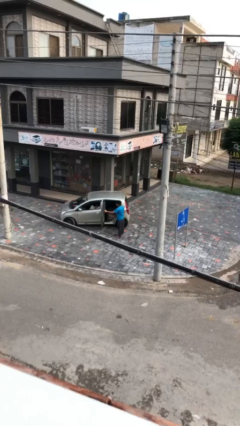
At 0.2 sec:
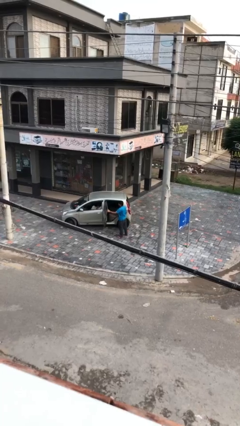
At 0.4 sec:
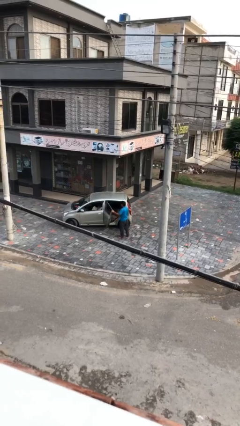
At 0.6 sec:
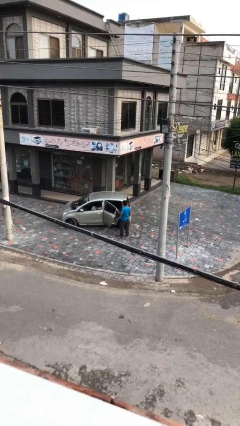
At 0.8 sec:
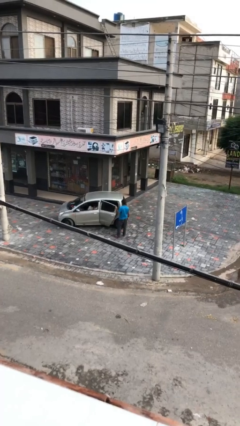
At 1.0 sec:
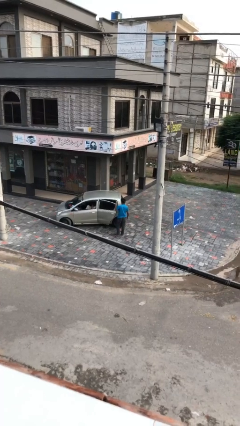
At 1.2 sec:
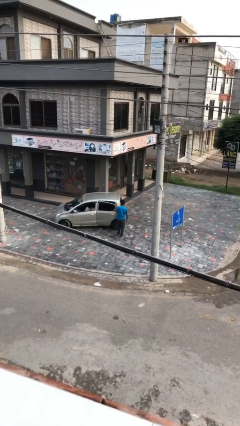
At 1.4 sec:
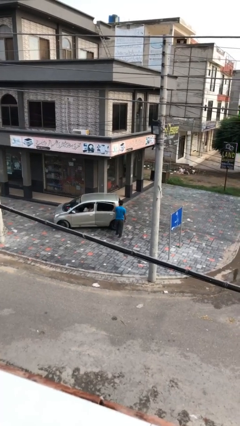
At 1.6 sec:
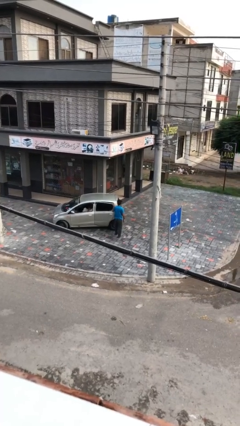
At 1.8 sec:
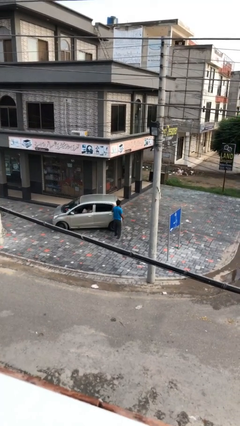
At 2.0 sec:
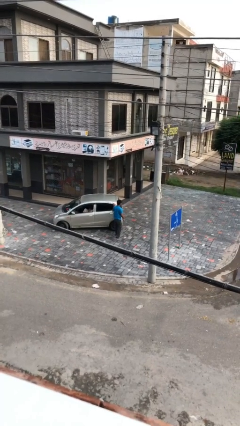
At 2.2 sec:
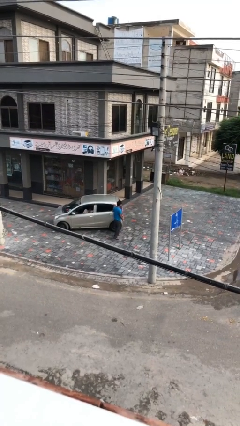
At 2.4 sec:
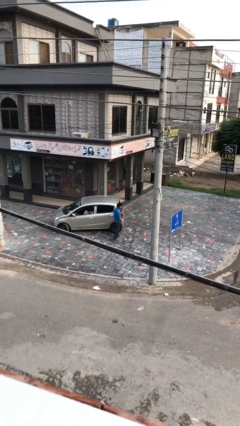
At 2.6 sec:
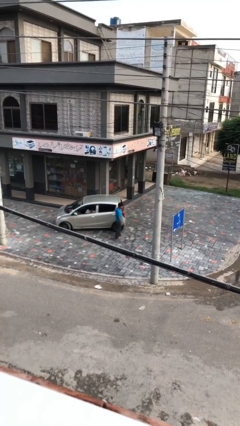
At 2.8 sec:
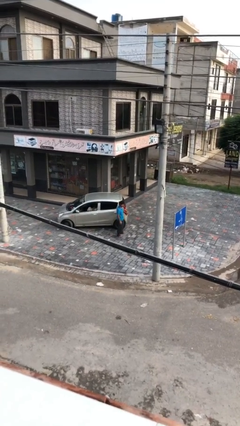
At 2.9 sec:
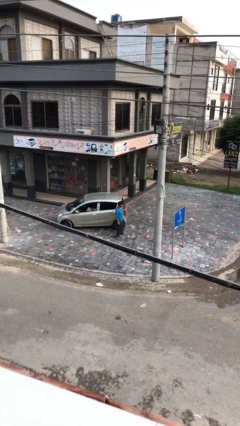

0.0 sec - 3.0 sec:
person closes car door

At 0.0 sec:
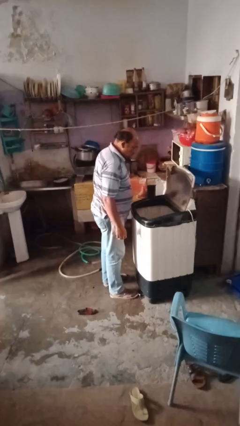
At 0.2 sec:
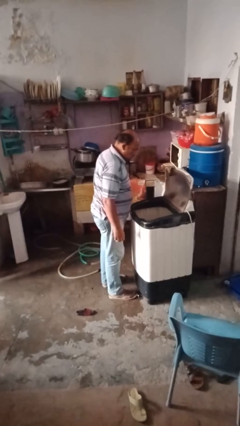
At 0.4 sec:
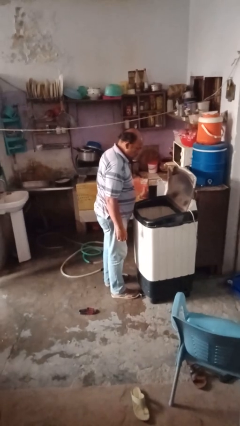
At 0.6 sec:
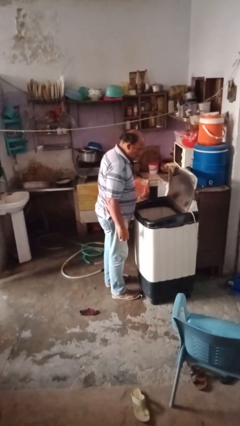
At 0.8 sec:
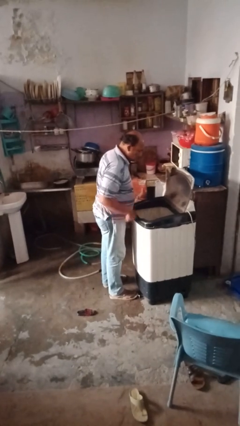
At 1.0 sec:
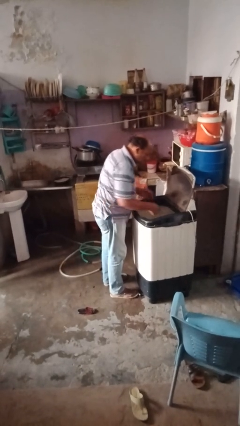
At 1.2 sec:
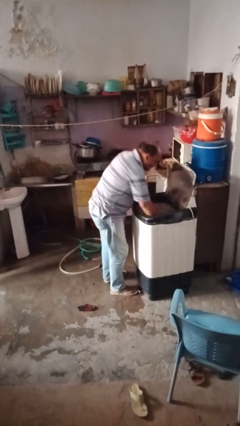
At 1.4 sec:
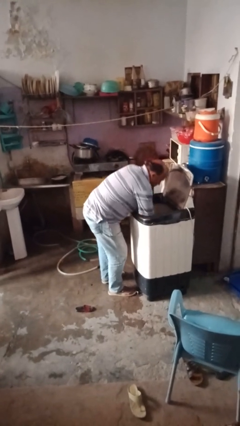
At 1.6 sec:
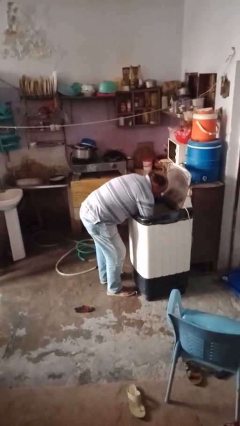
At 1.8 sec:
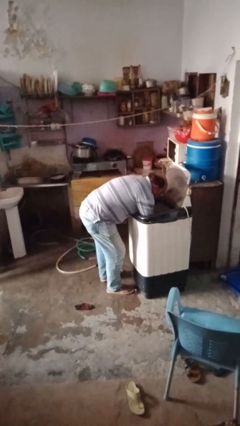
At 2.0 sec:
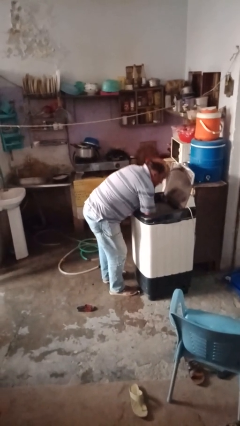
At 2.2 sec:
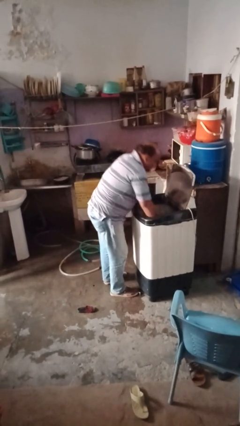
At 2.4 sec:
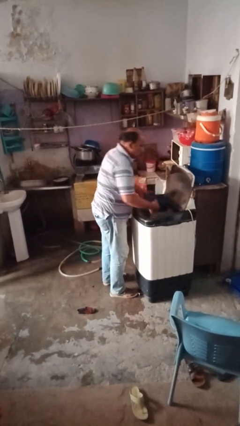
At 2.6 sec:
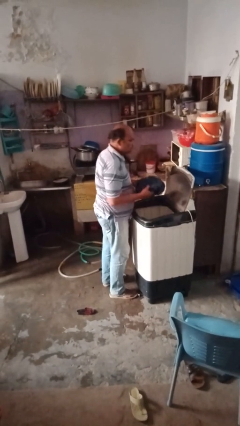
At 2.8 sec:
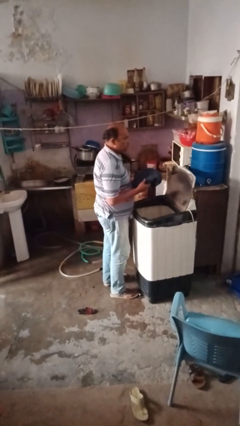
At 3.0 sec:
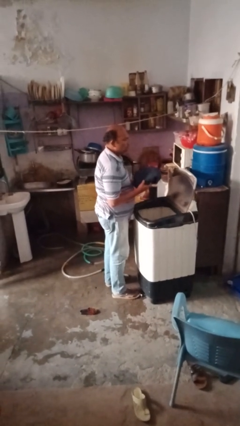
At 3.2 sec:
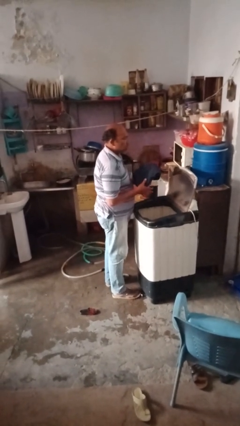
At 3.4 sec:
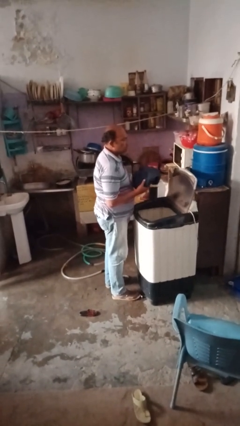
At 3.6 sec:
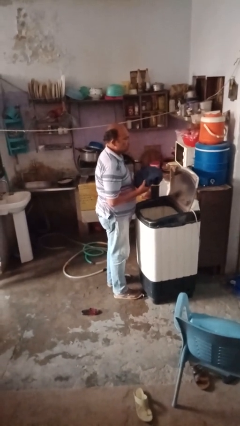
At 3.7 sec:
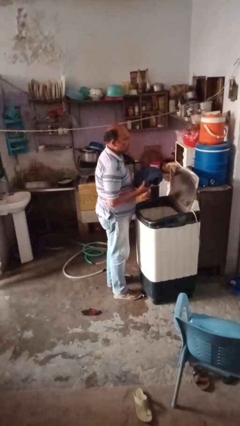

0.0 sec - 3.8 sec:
person unloads clotheswasher

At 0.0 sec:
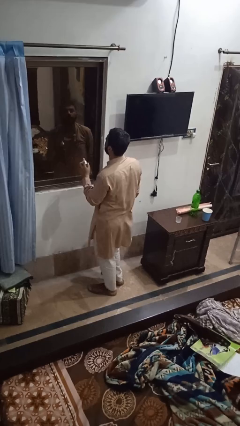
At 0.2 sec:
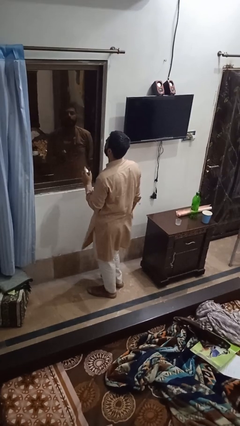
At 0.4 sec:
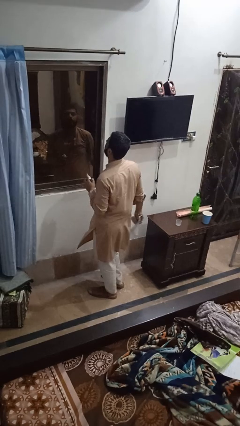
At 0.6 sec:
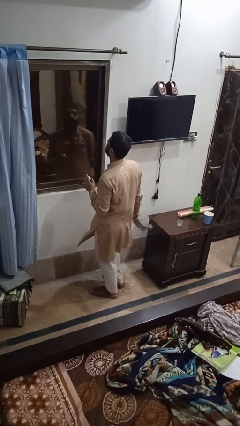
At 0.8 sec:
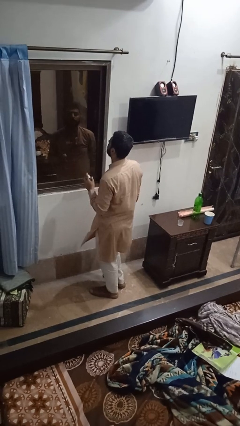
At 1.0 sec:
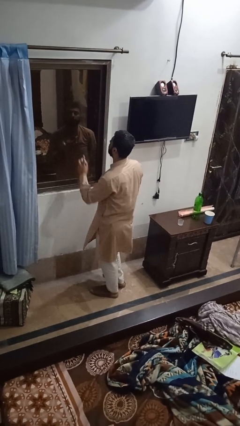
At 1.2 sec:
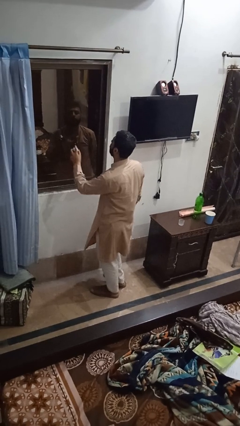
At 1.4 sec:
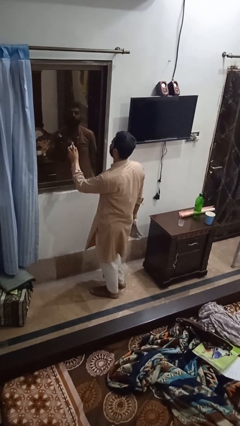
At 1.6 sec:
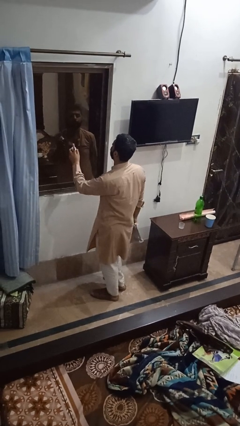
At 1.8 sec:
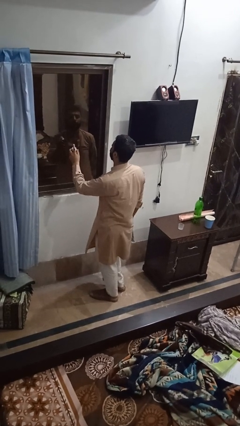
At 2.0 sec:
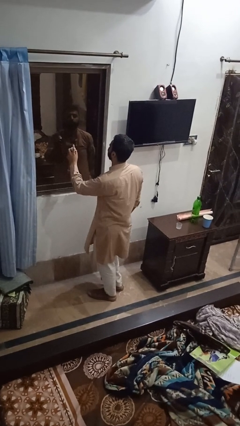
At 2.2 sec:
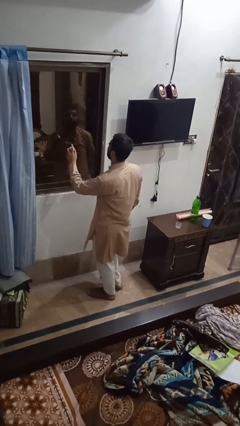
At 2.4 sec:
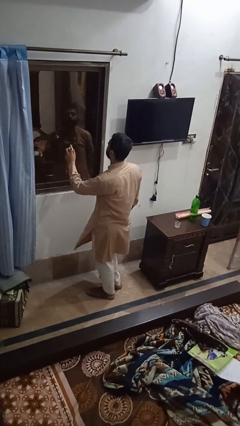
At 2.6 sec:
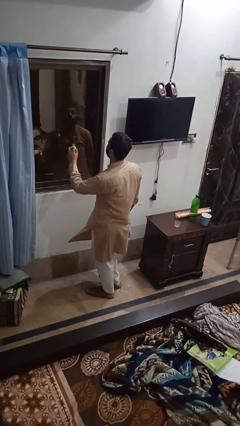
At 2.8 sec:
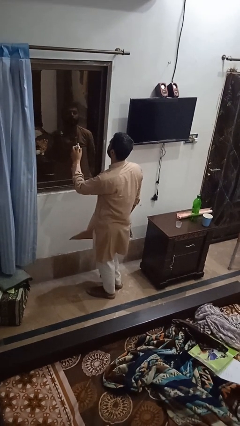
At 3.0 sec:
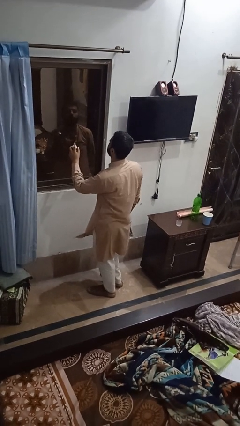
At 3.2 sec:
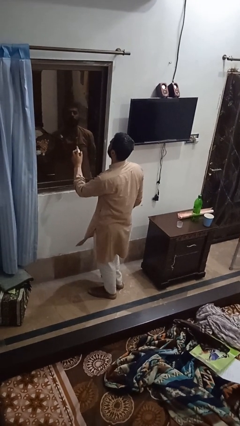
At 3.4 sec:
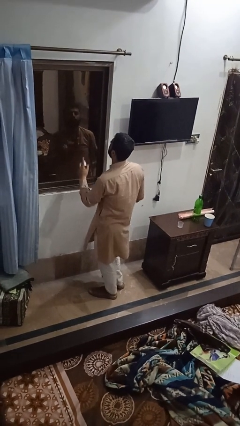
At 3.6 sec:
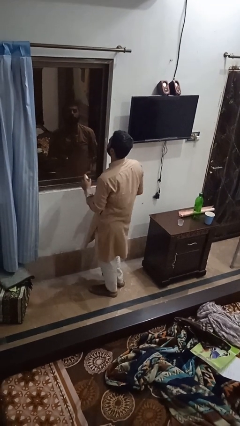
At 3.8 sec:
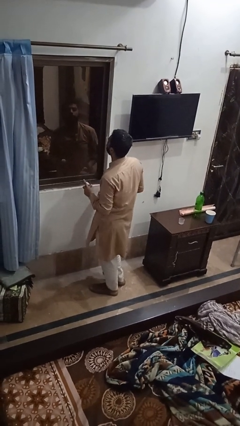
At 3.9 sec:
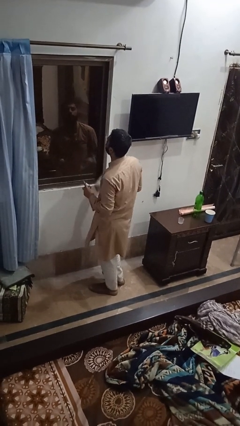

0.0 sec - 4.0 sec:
person sprays from bottle

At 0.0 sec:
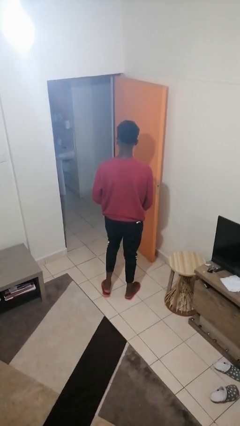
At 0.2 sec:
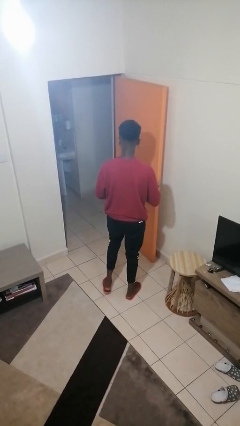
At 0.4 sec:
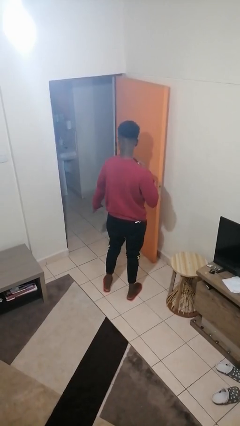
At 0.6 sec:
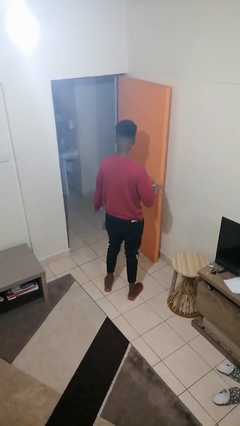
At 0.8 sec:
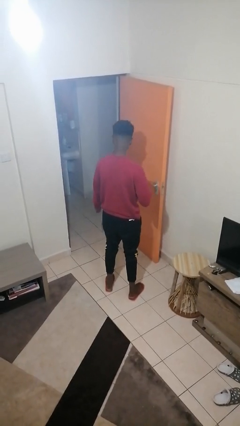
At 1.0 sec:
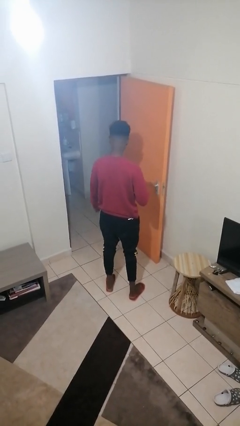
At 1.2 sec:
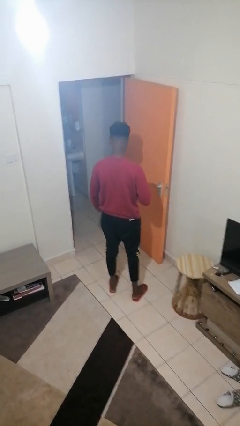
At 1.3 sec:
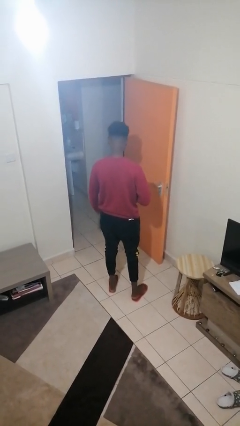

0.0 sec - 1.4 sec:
person karate chop

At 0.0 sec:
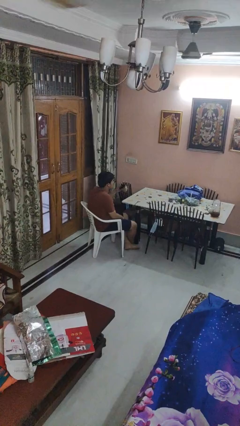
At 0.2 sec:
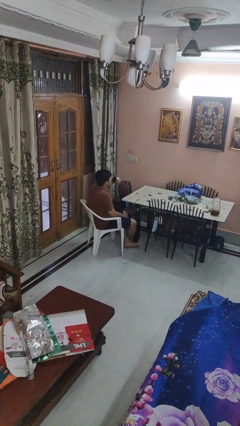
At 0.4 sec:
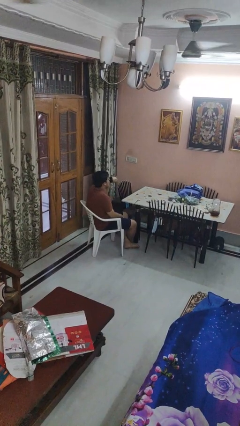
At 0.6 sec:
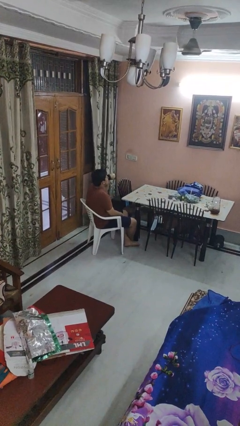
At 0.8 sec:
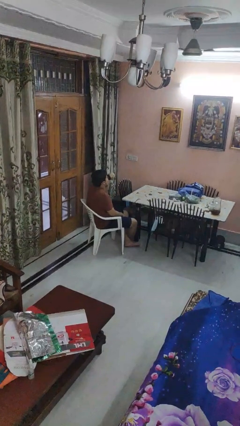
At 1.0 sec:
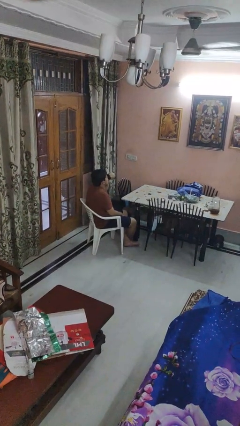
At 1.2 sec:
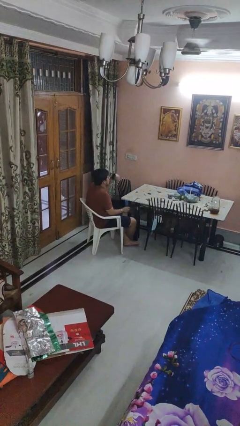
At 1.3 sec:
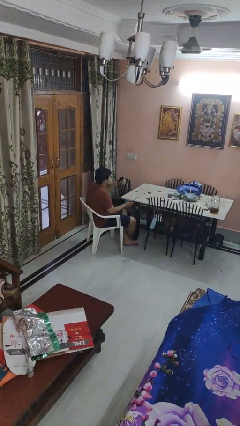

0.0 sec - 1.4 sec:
person drinks from mug

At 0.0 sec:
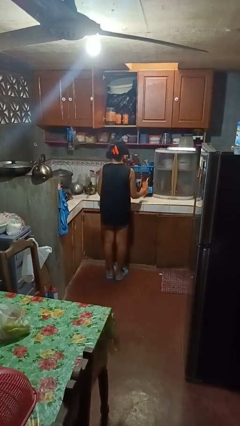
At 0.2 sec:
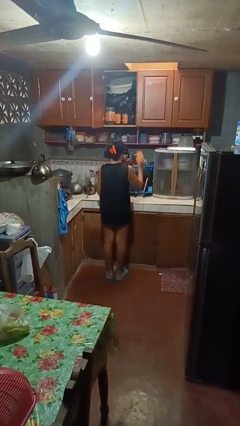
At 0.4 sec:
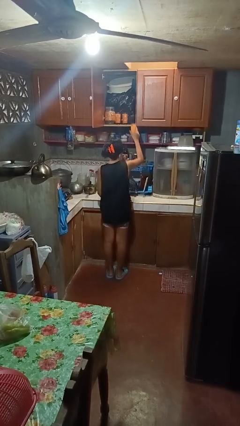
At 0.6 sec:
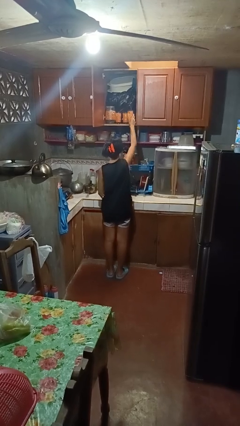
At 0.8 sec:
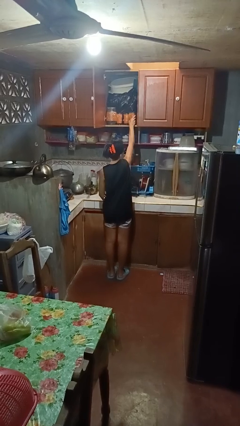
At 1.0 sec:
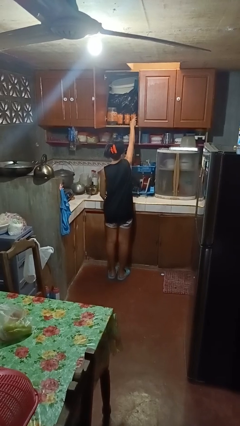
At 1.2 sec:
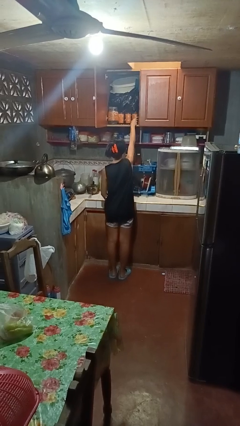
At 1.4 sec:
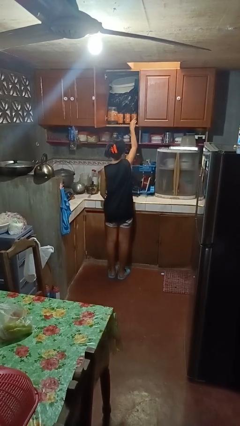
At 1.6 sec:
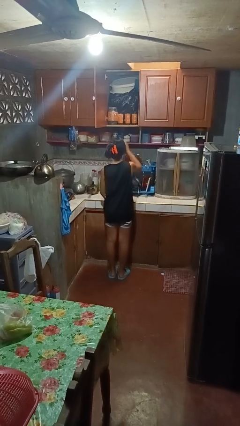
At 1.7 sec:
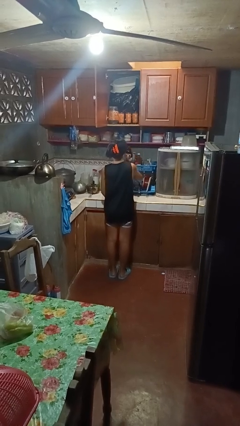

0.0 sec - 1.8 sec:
person puts object in cabinet

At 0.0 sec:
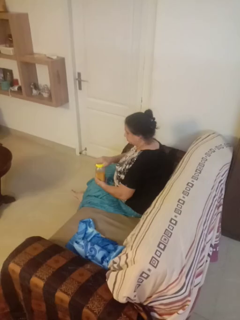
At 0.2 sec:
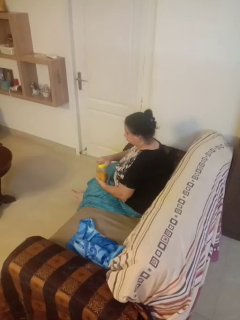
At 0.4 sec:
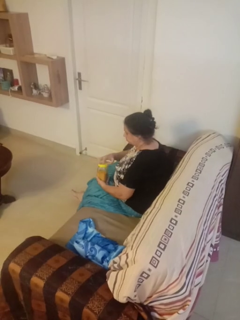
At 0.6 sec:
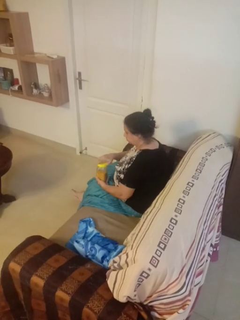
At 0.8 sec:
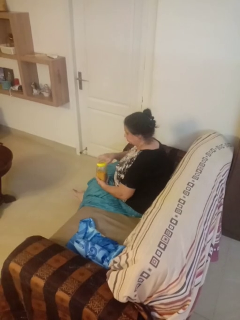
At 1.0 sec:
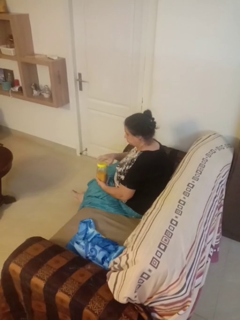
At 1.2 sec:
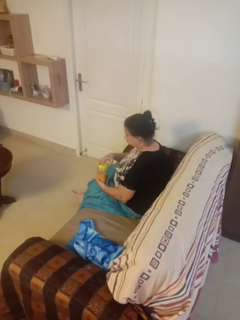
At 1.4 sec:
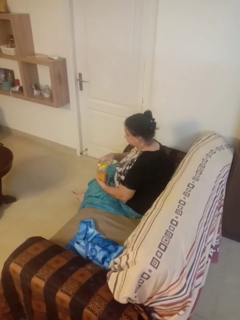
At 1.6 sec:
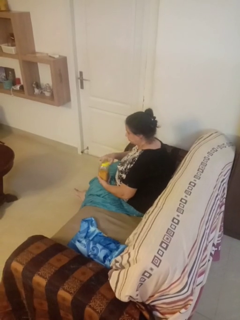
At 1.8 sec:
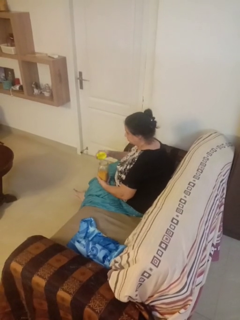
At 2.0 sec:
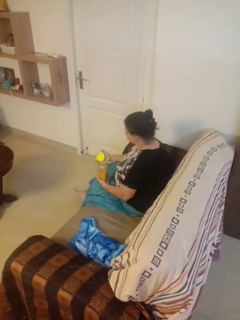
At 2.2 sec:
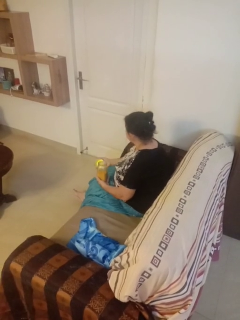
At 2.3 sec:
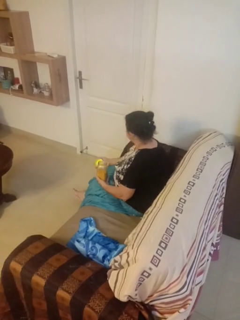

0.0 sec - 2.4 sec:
person opens jar
